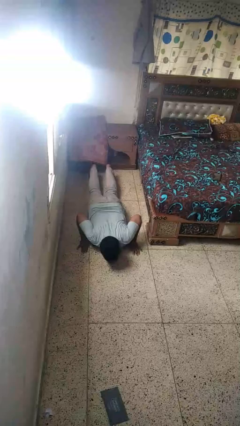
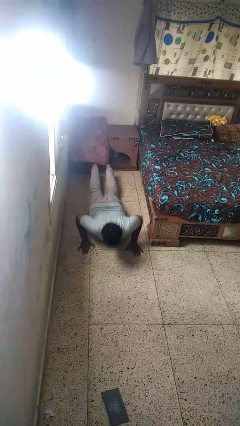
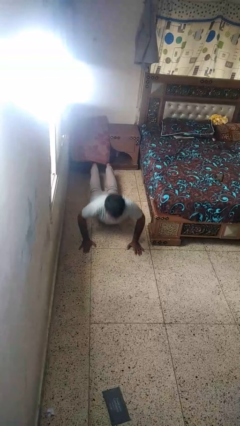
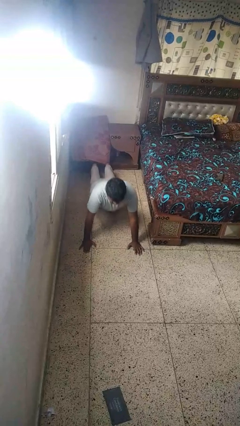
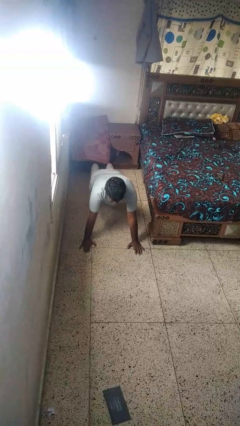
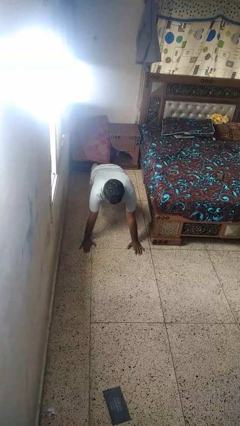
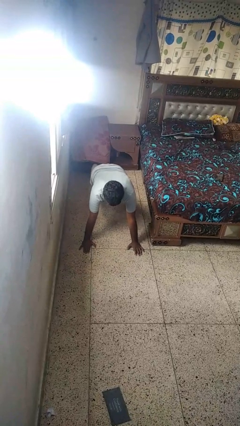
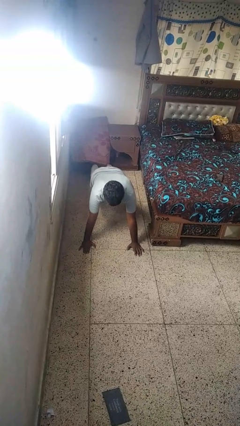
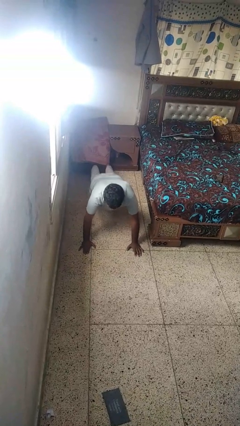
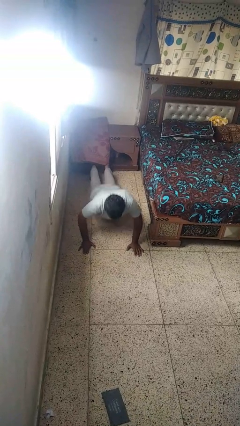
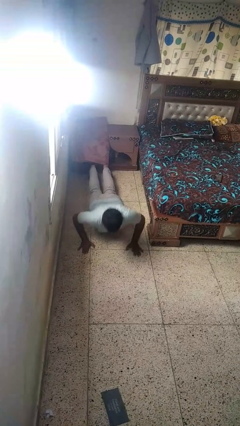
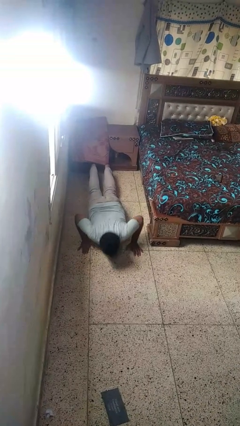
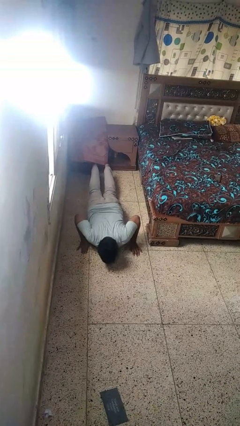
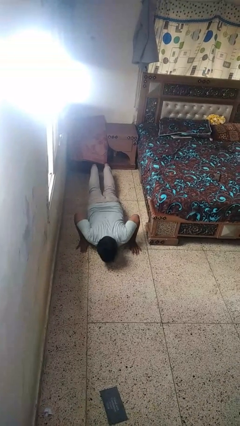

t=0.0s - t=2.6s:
person exercises with pushup

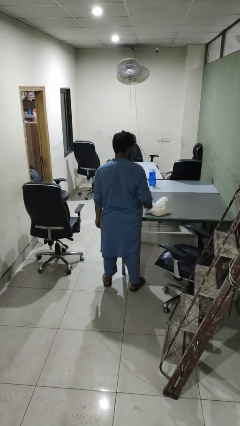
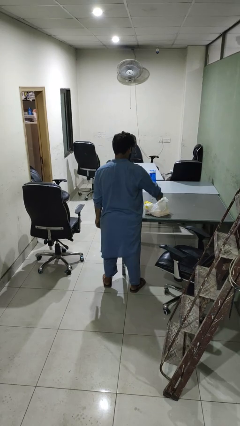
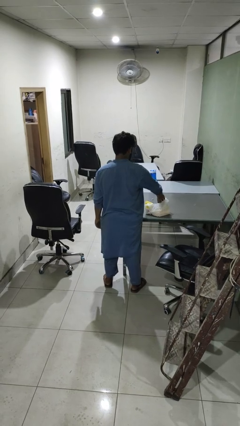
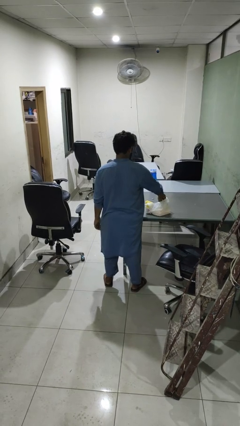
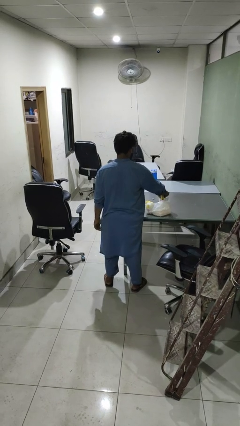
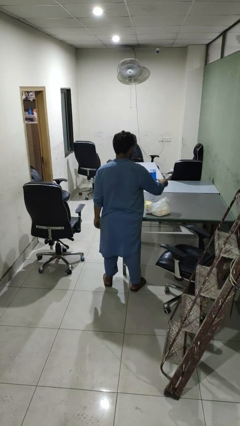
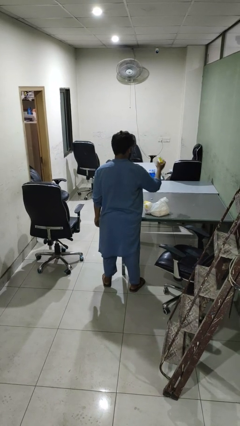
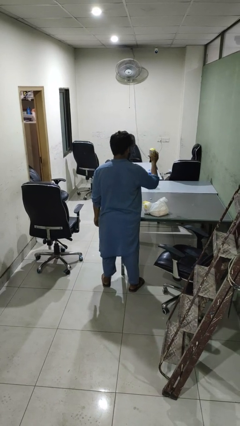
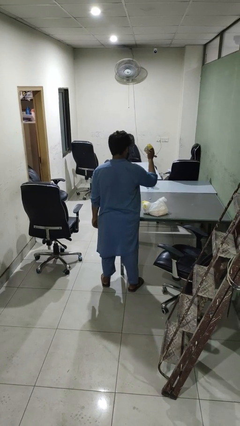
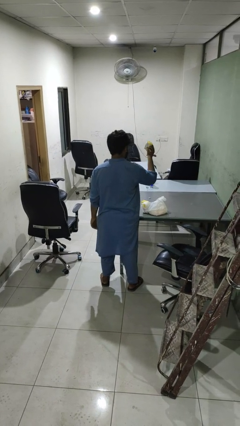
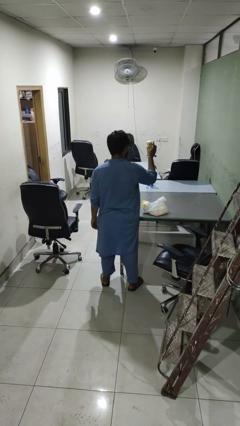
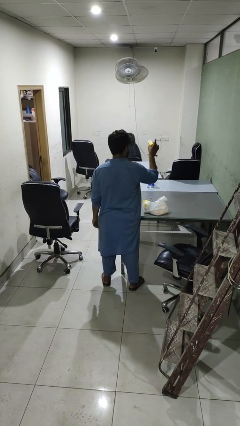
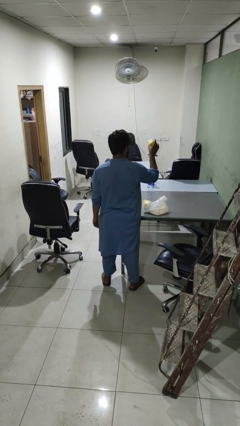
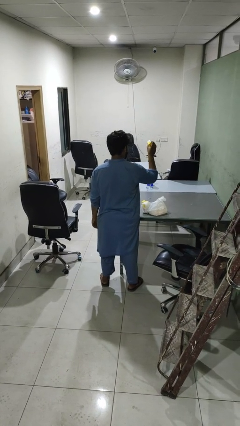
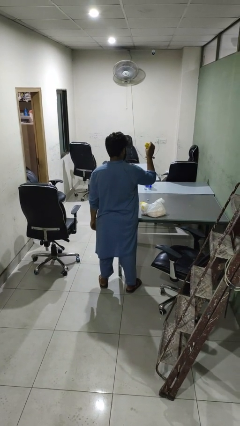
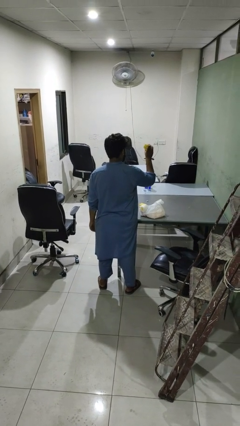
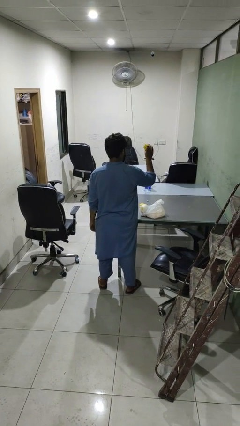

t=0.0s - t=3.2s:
person takes object from bag

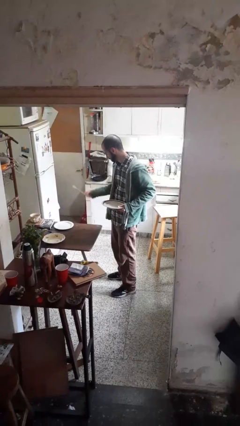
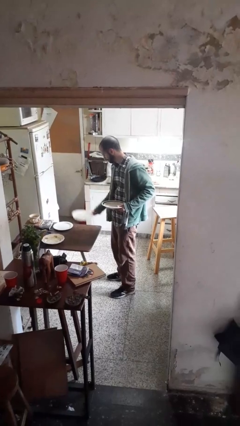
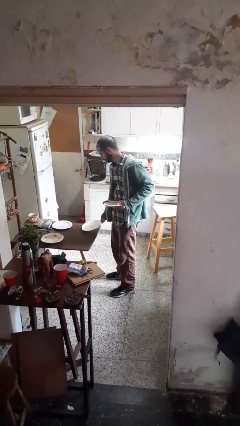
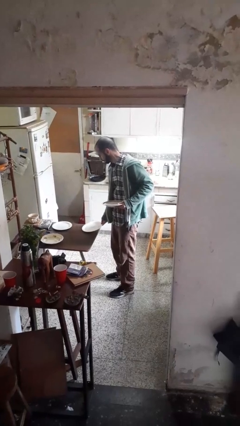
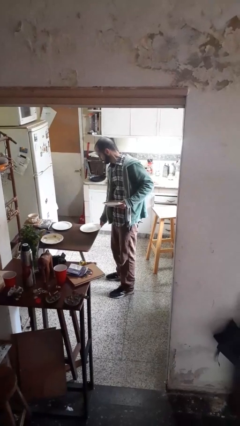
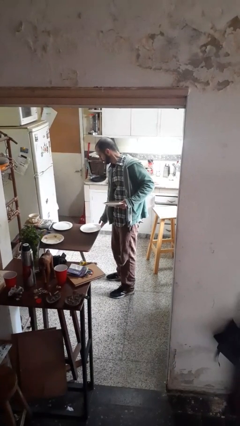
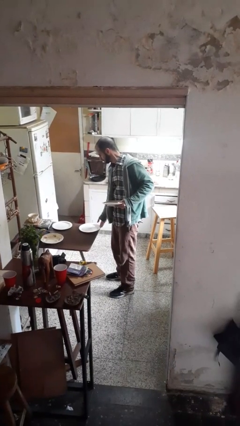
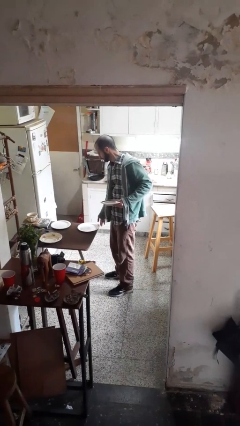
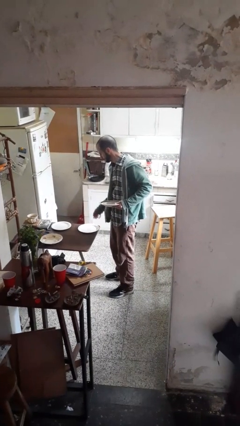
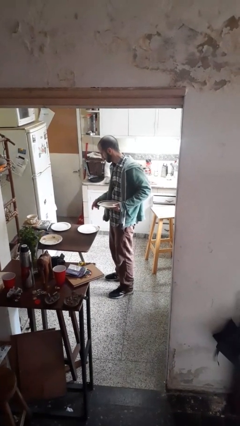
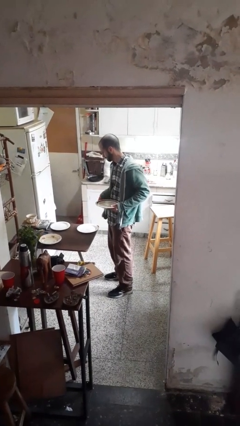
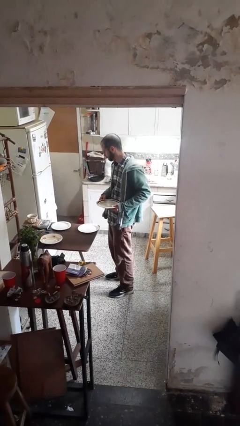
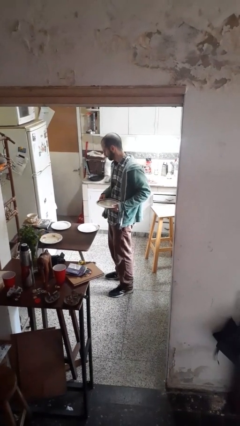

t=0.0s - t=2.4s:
person sets table

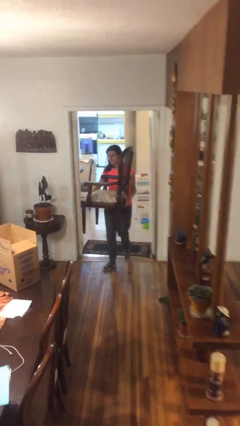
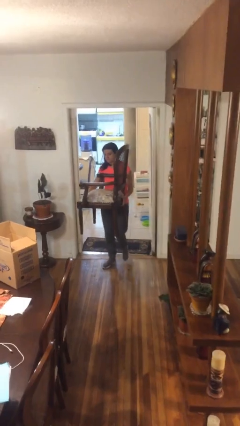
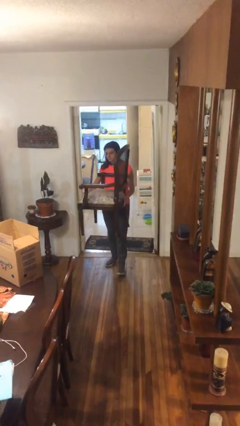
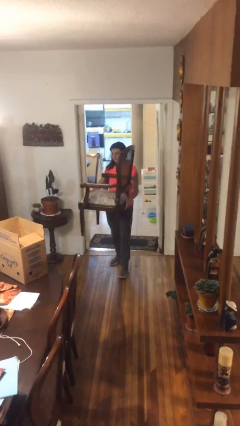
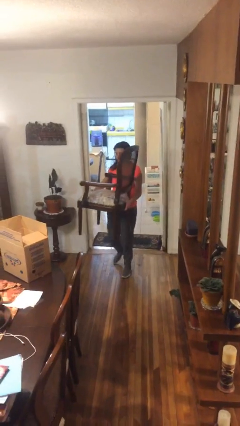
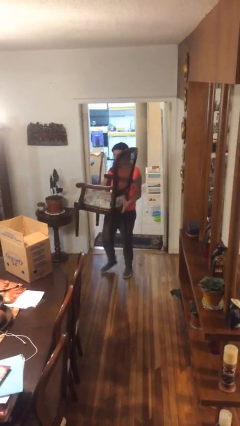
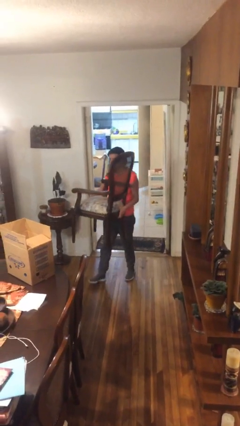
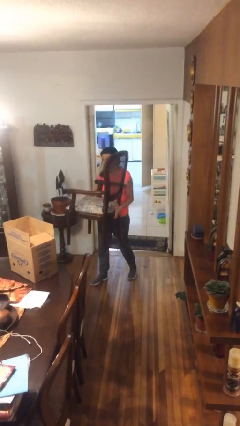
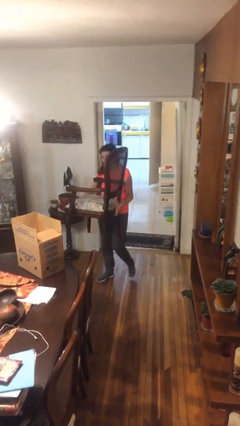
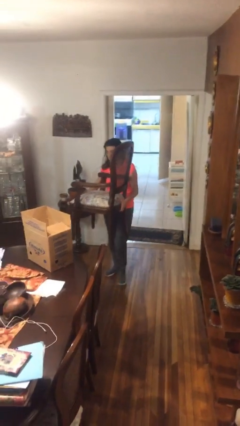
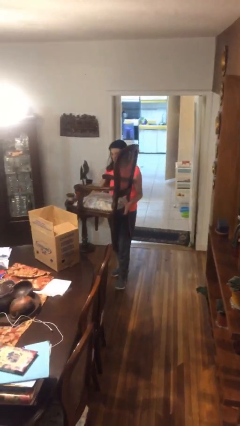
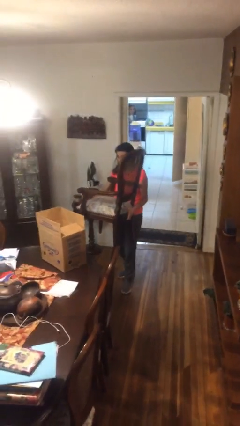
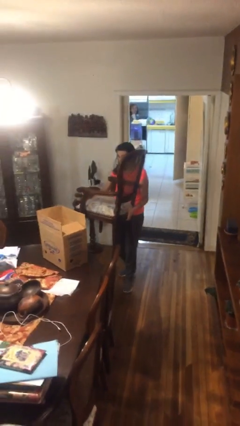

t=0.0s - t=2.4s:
person carries heavy object

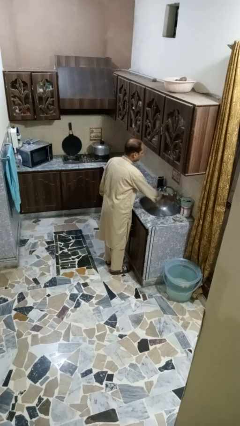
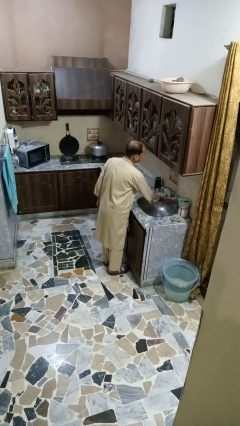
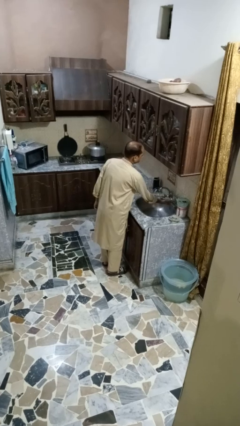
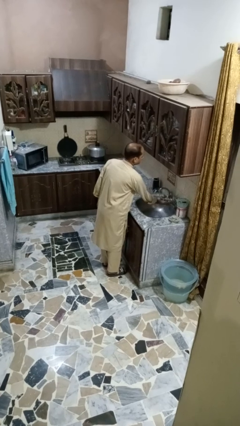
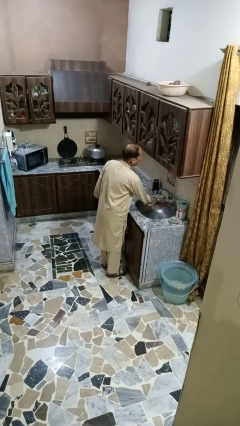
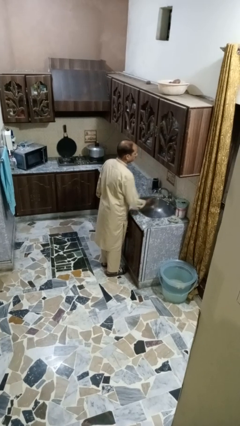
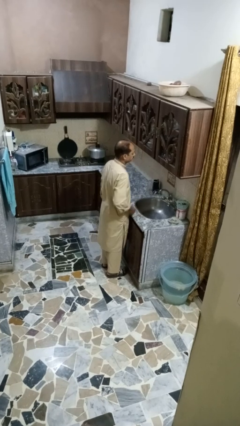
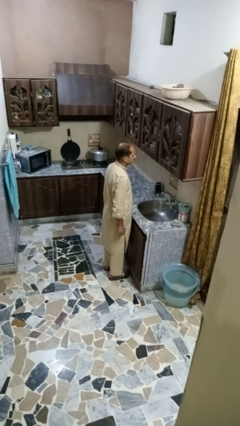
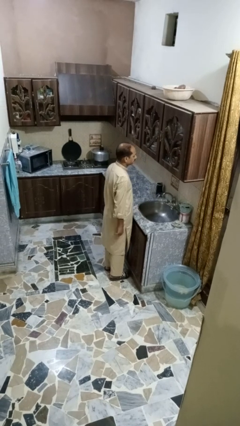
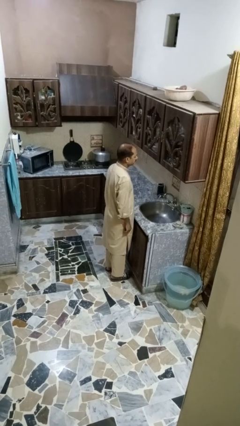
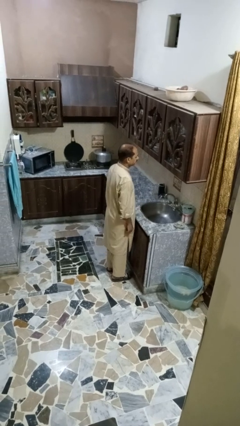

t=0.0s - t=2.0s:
person turns off faucet

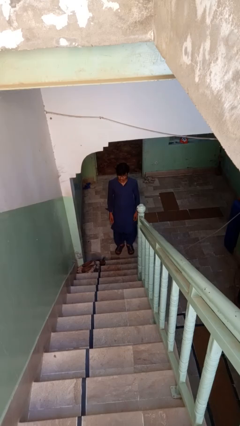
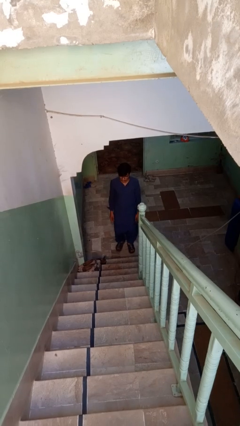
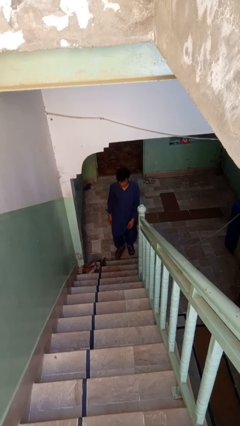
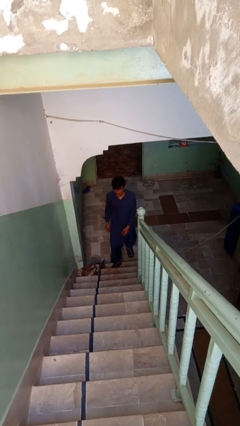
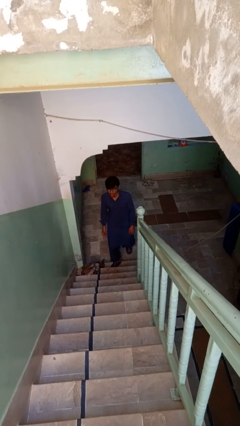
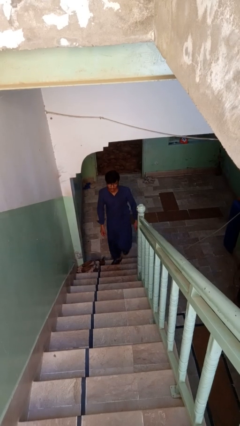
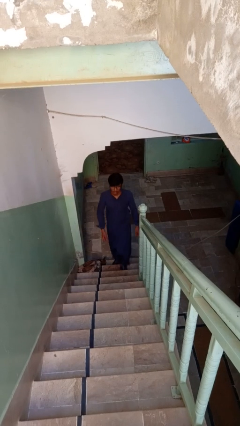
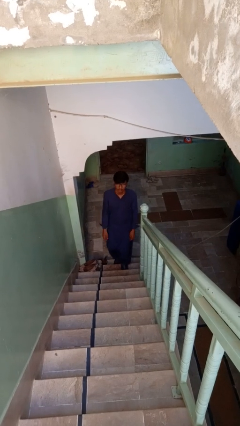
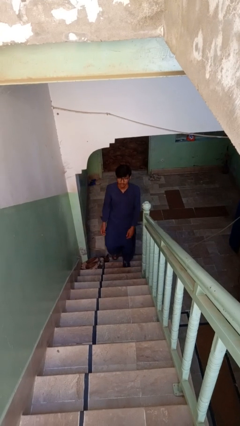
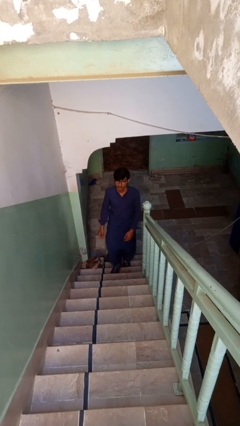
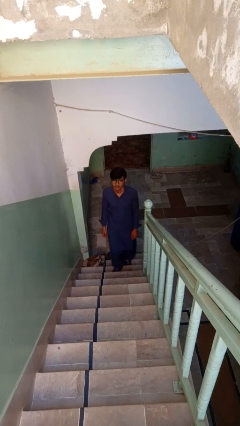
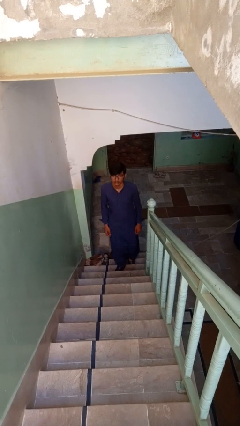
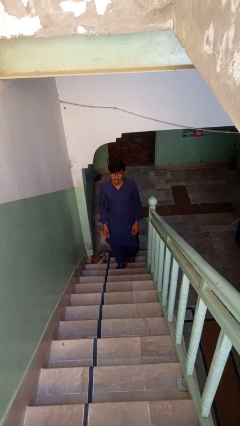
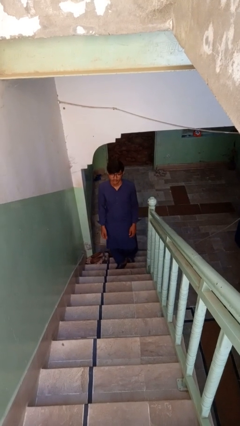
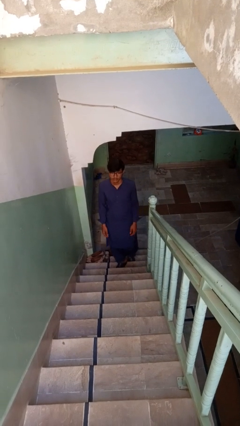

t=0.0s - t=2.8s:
person climbs up stairs

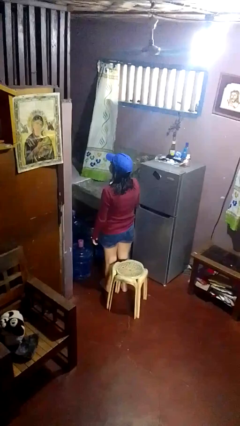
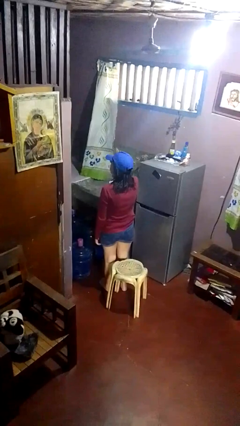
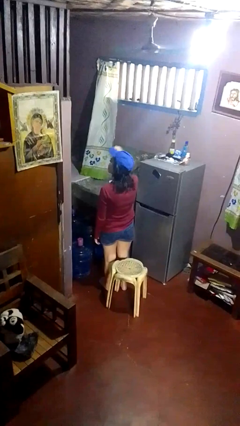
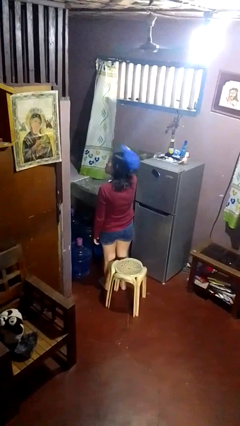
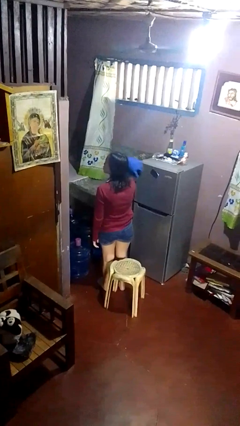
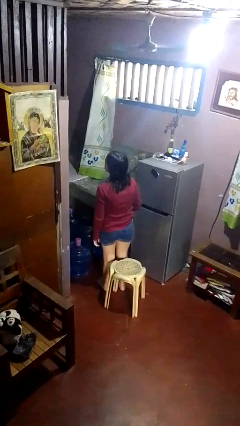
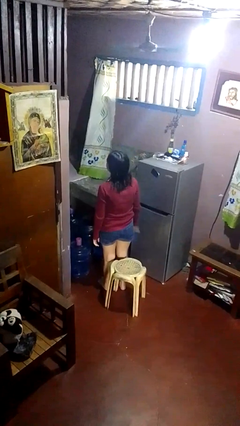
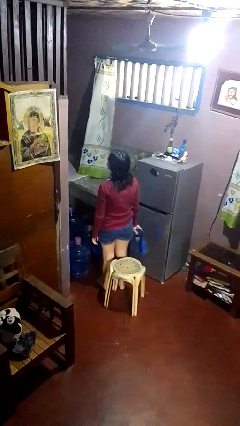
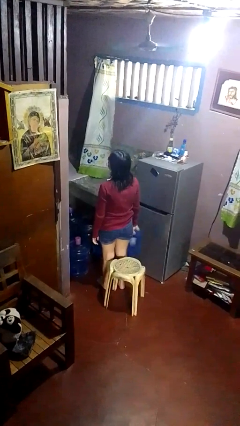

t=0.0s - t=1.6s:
person takes off hat
